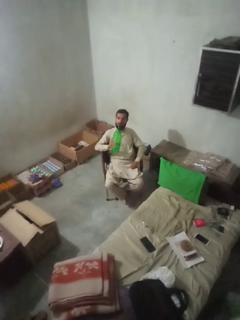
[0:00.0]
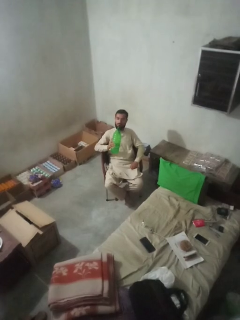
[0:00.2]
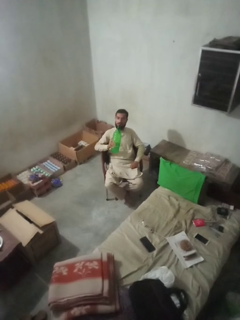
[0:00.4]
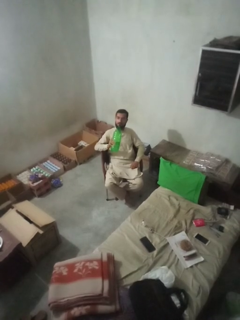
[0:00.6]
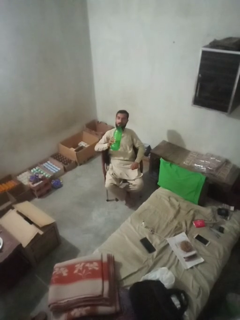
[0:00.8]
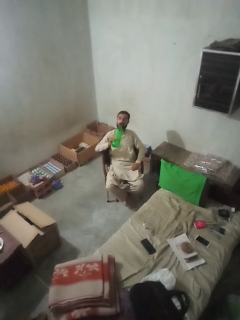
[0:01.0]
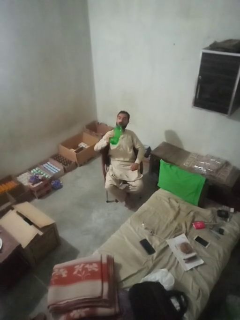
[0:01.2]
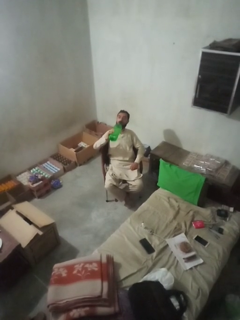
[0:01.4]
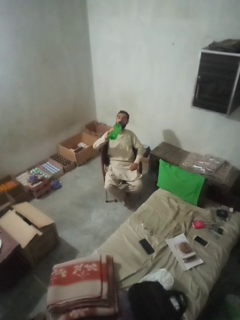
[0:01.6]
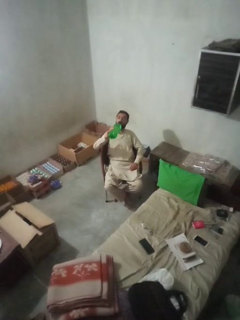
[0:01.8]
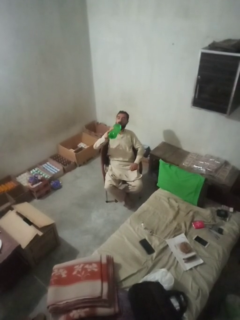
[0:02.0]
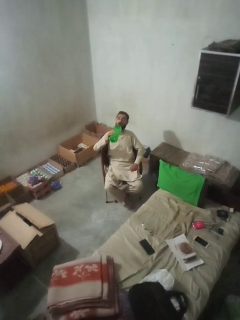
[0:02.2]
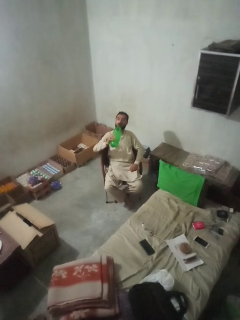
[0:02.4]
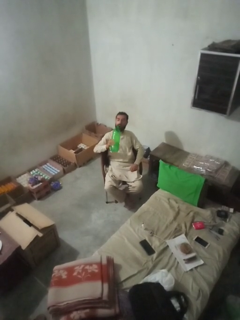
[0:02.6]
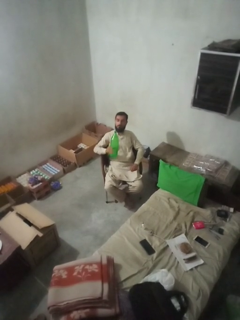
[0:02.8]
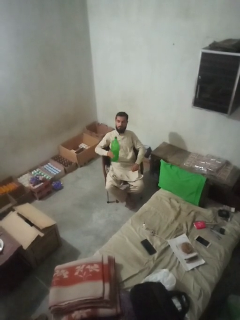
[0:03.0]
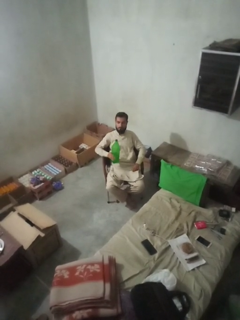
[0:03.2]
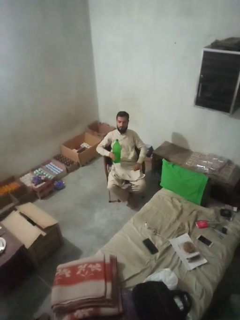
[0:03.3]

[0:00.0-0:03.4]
person drinks from bottle

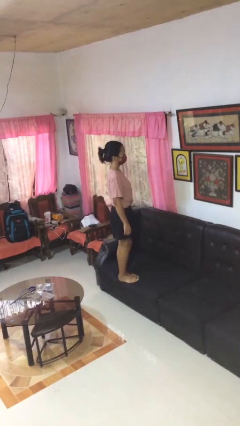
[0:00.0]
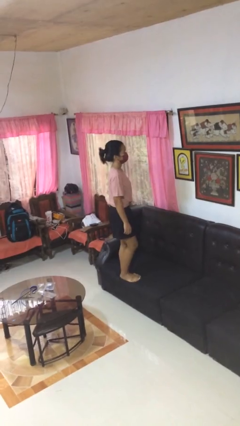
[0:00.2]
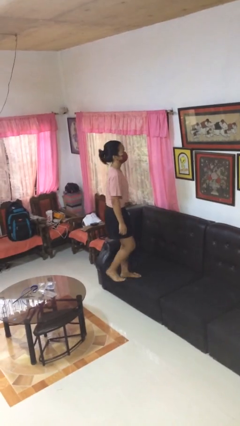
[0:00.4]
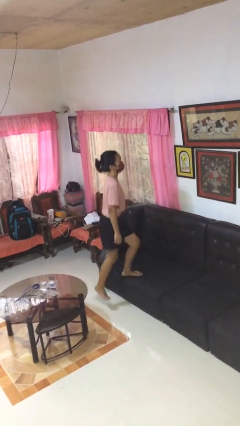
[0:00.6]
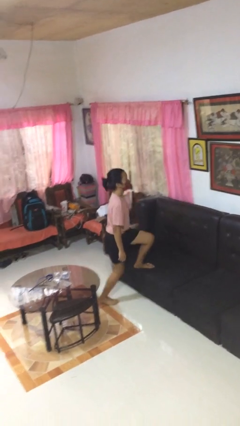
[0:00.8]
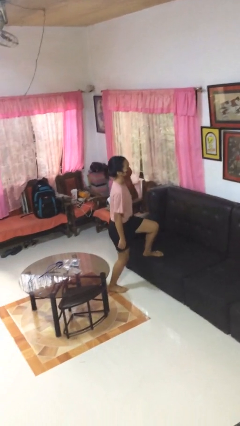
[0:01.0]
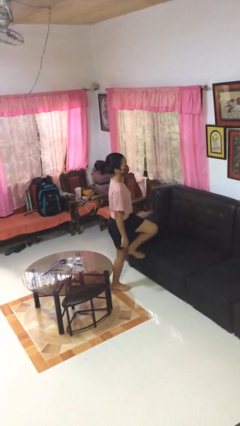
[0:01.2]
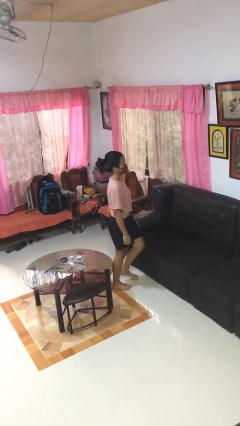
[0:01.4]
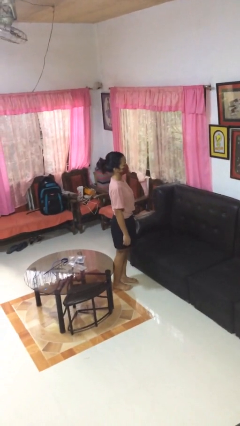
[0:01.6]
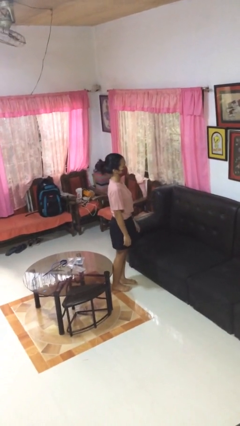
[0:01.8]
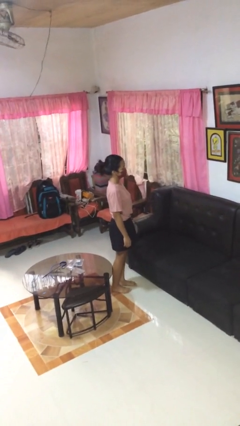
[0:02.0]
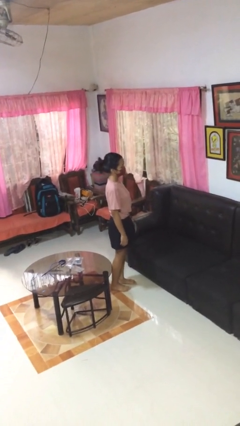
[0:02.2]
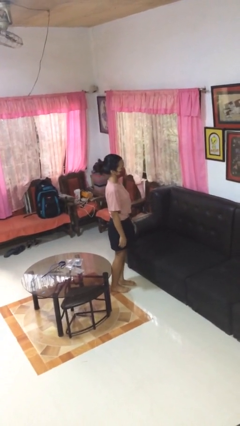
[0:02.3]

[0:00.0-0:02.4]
person climbs off couch

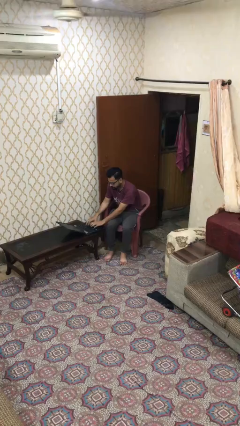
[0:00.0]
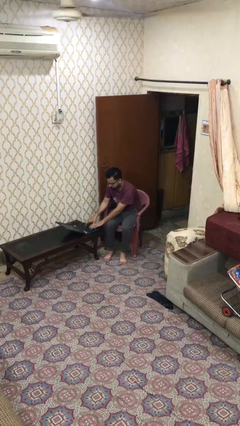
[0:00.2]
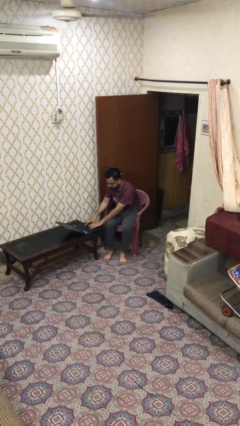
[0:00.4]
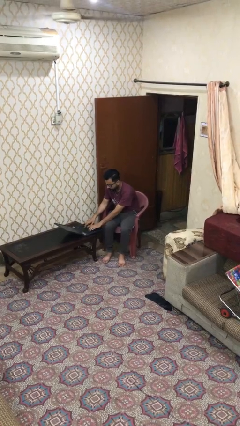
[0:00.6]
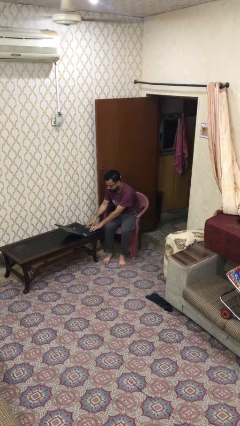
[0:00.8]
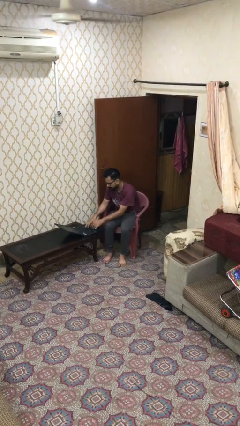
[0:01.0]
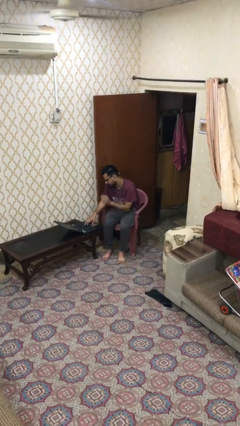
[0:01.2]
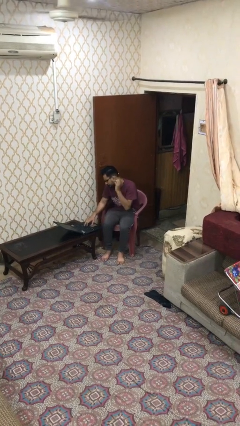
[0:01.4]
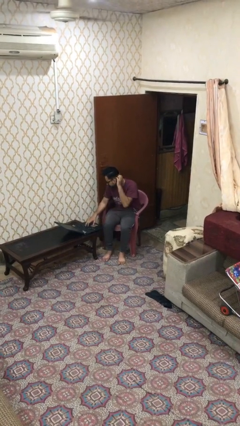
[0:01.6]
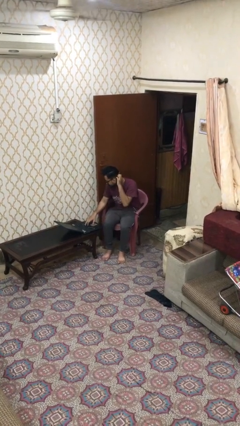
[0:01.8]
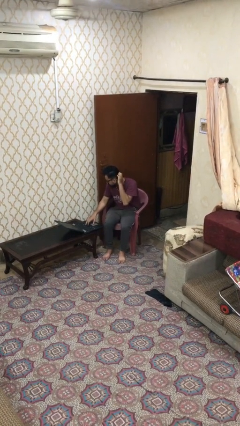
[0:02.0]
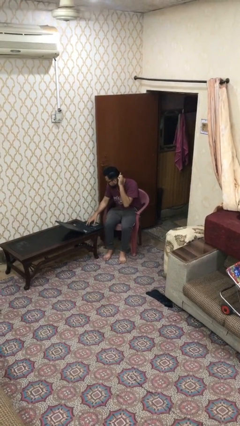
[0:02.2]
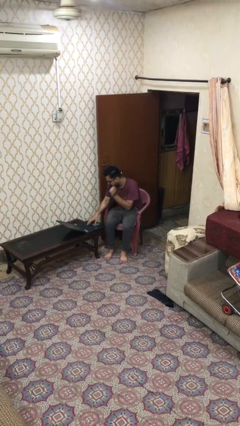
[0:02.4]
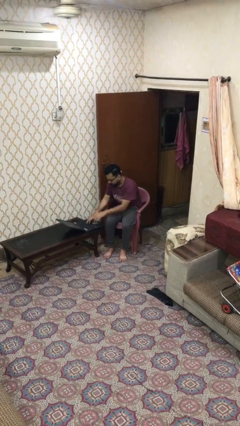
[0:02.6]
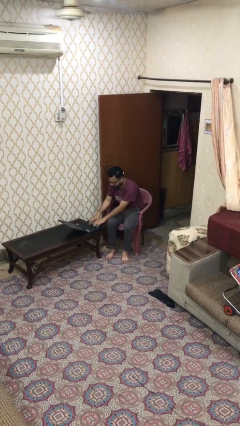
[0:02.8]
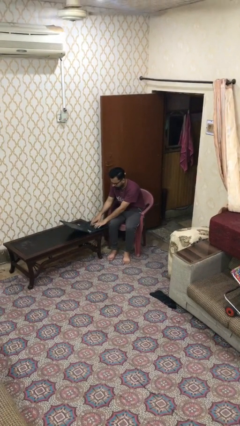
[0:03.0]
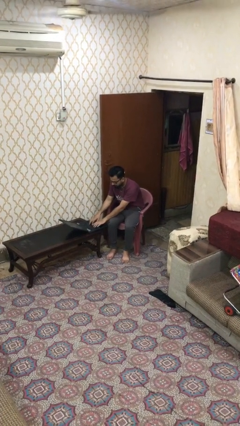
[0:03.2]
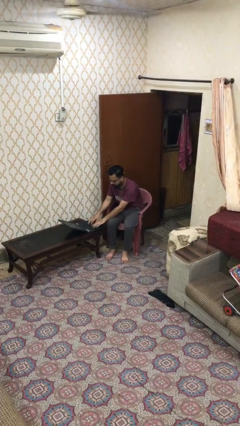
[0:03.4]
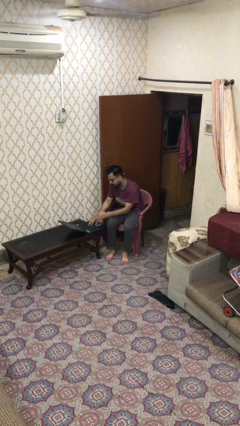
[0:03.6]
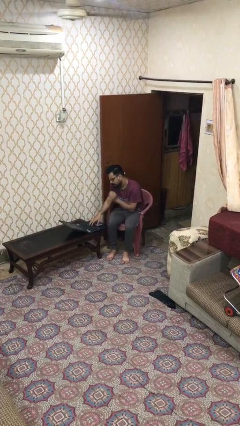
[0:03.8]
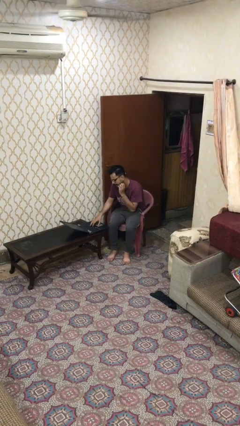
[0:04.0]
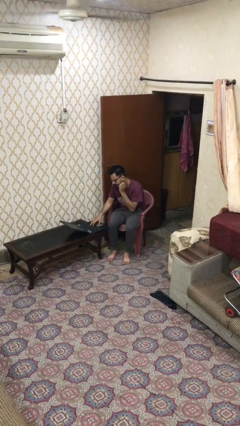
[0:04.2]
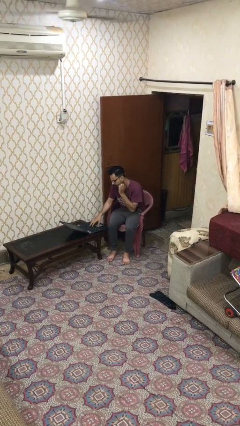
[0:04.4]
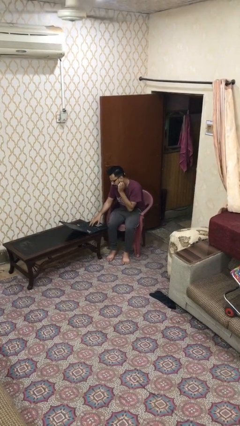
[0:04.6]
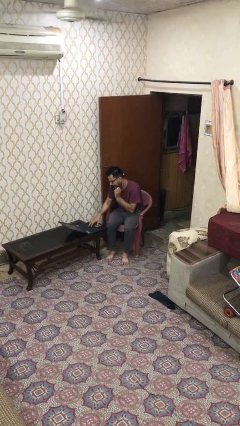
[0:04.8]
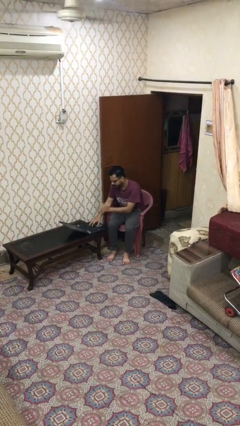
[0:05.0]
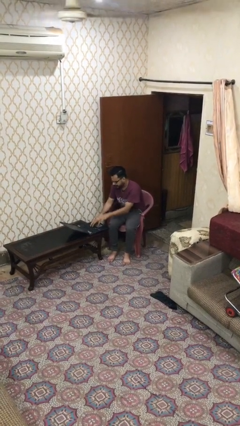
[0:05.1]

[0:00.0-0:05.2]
person interacts with laptop

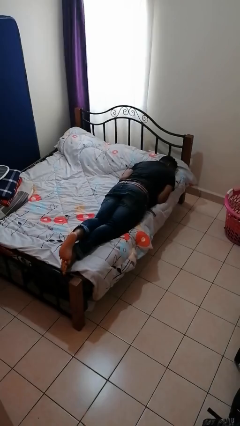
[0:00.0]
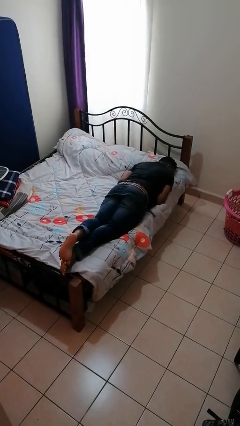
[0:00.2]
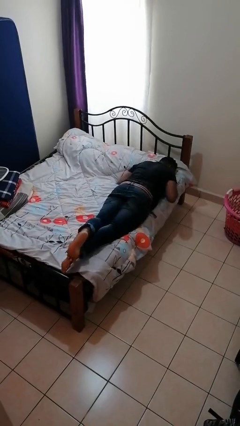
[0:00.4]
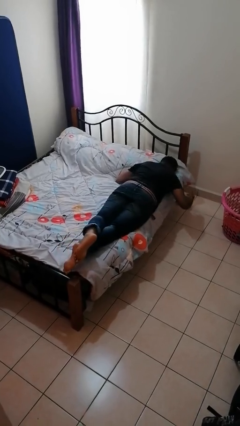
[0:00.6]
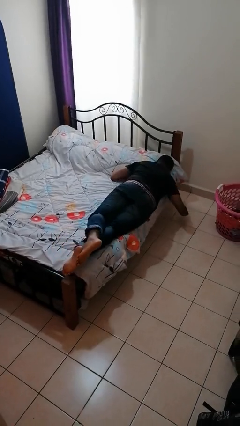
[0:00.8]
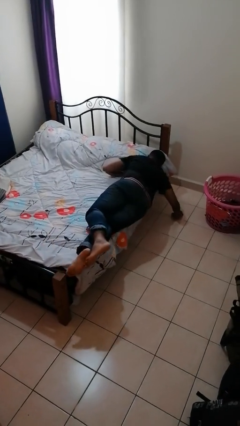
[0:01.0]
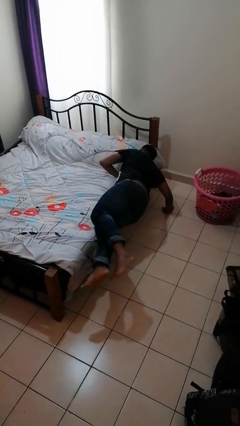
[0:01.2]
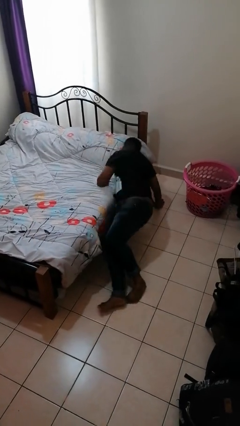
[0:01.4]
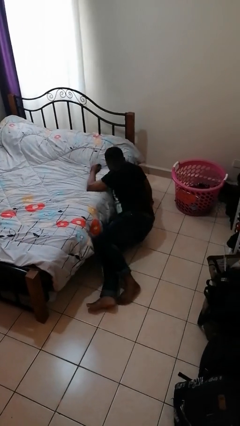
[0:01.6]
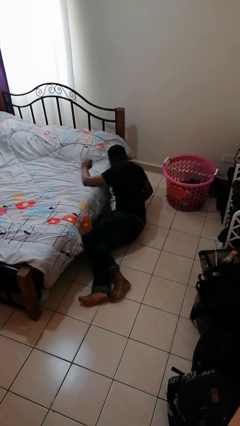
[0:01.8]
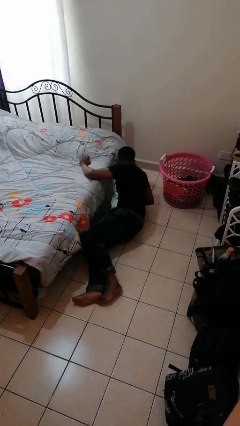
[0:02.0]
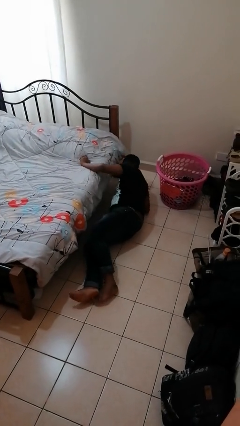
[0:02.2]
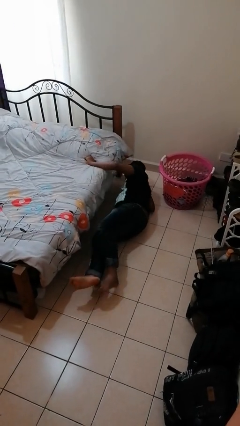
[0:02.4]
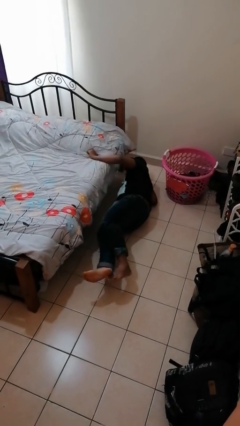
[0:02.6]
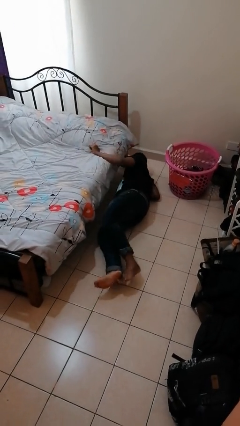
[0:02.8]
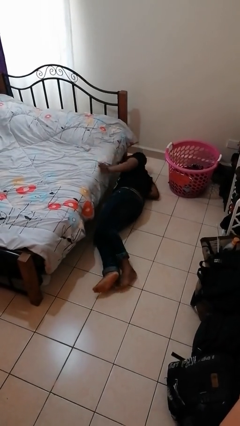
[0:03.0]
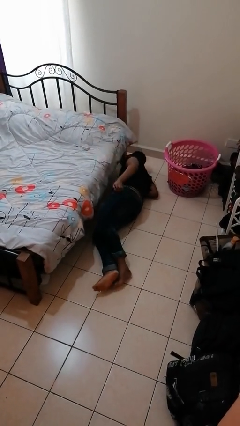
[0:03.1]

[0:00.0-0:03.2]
person falls from bed

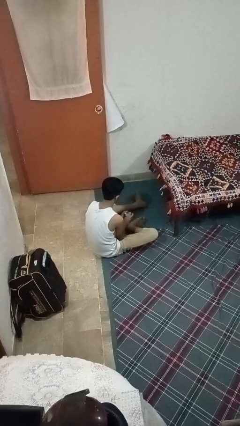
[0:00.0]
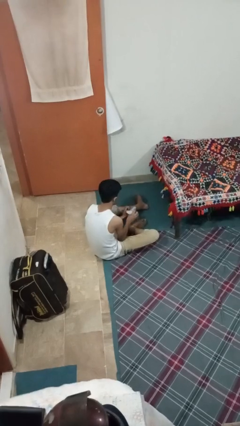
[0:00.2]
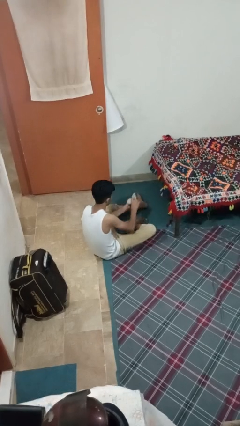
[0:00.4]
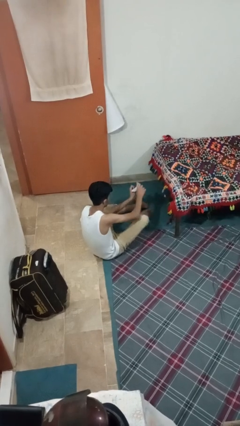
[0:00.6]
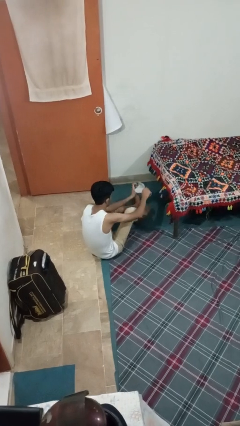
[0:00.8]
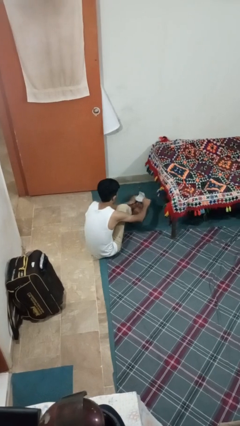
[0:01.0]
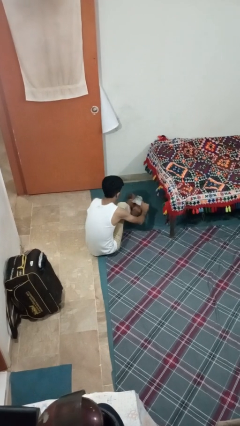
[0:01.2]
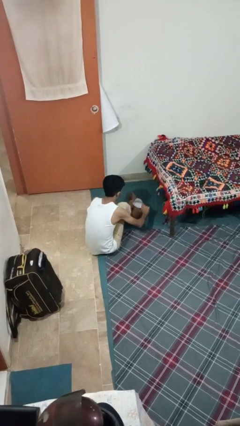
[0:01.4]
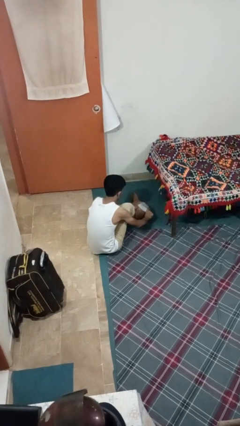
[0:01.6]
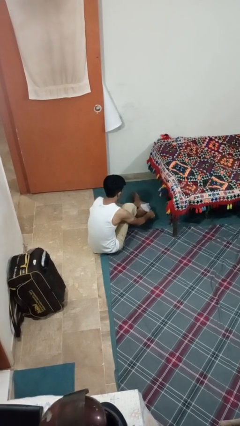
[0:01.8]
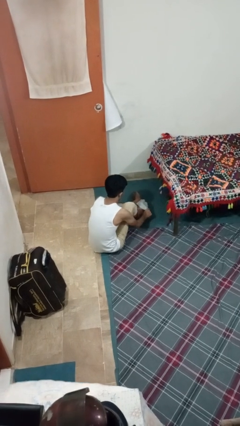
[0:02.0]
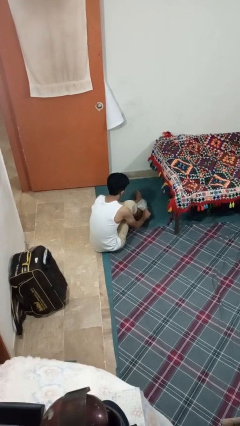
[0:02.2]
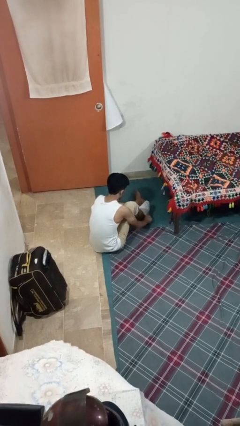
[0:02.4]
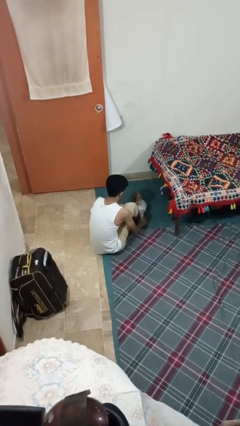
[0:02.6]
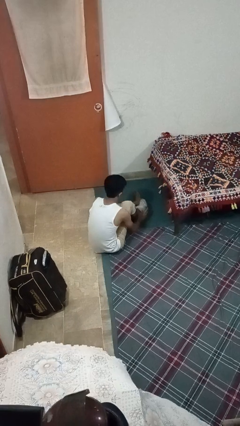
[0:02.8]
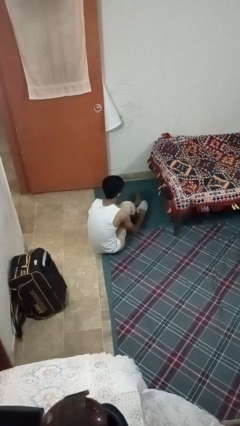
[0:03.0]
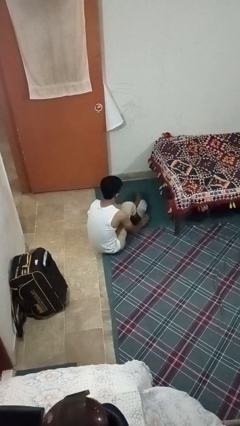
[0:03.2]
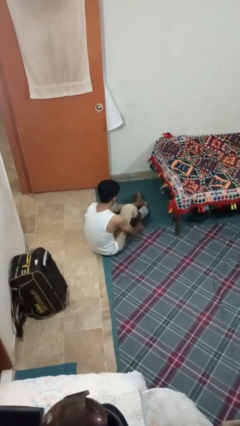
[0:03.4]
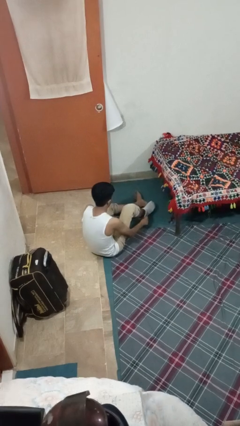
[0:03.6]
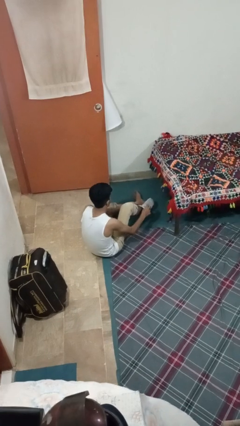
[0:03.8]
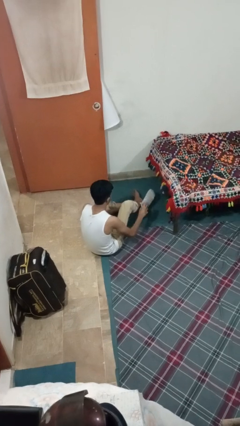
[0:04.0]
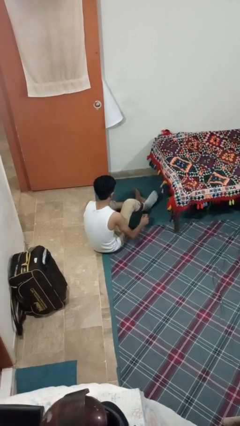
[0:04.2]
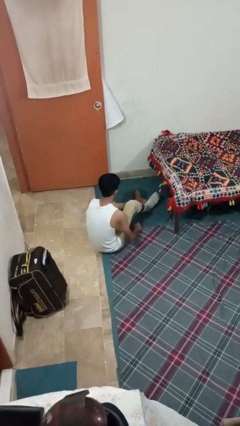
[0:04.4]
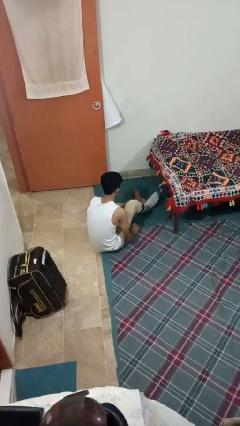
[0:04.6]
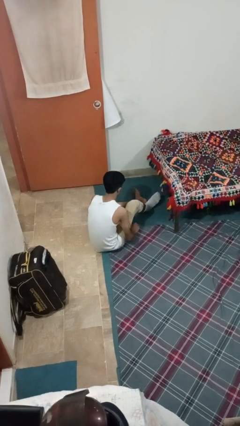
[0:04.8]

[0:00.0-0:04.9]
person puts on socks
